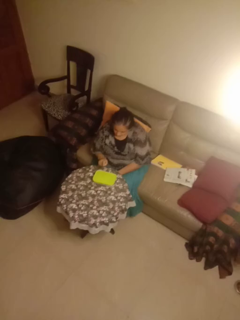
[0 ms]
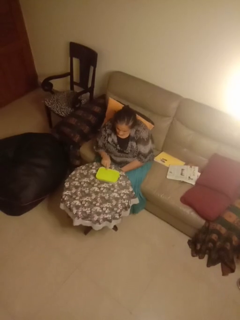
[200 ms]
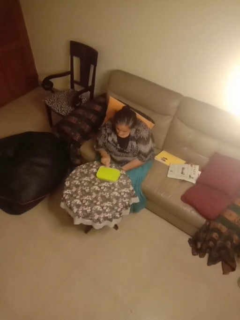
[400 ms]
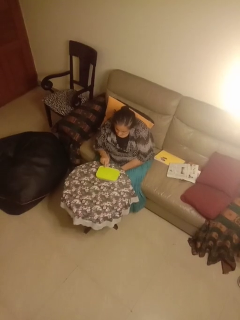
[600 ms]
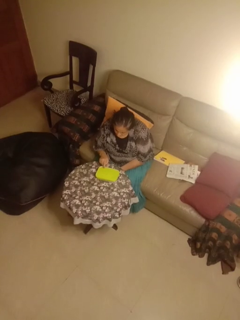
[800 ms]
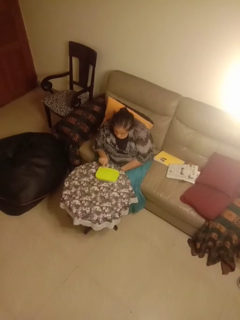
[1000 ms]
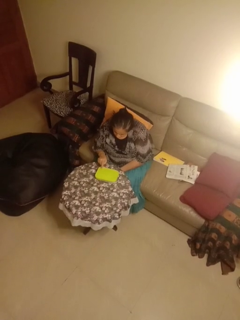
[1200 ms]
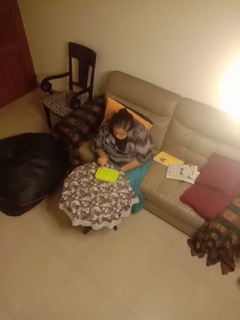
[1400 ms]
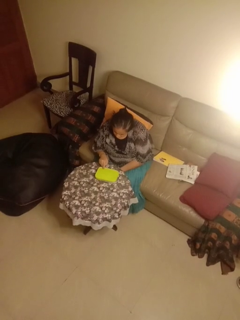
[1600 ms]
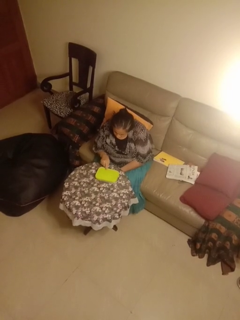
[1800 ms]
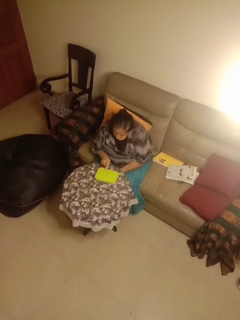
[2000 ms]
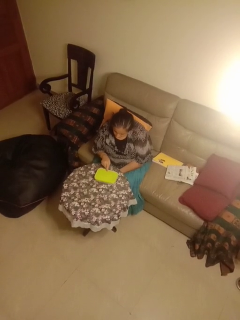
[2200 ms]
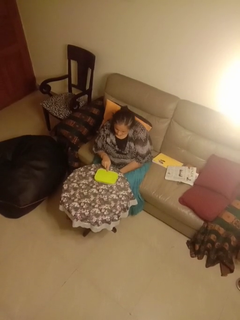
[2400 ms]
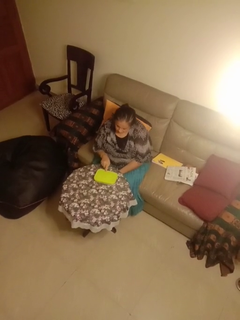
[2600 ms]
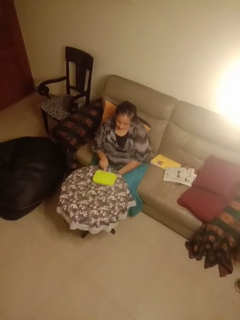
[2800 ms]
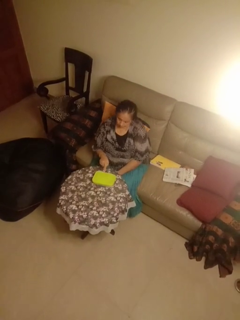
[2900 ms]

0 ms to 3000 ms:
person taps object with finger

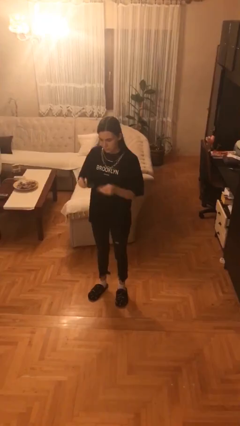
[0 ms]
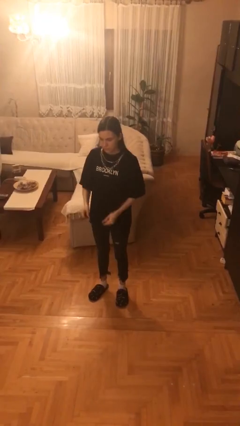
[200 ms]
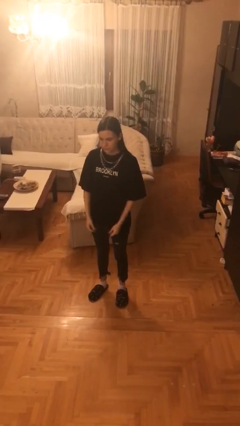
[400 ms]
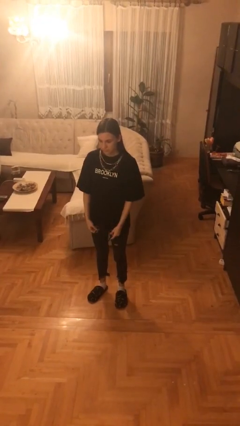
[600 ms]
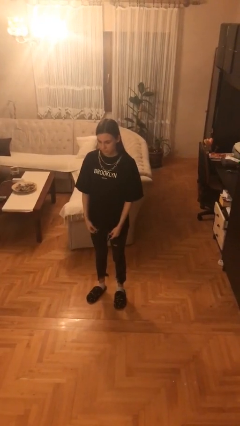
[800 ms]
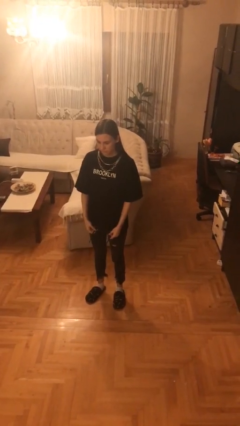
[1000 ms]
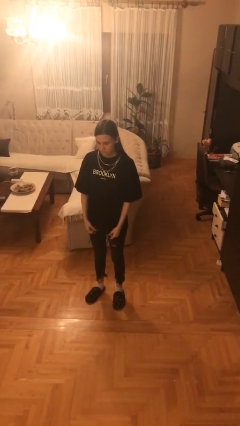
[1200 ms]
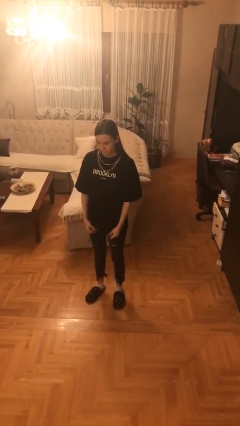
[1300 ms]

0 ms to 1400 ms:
person takes off sunglasses

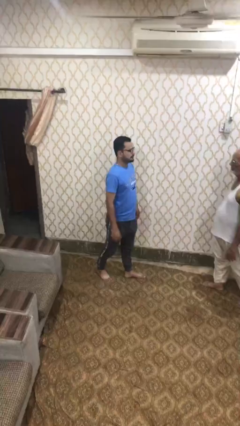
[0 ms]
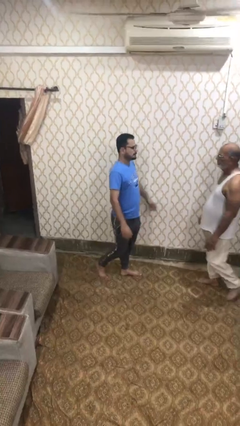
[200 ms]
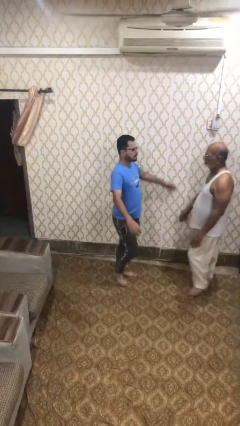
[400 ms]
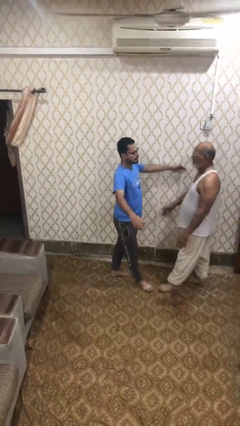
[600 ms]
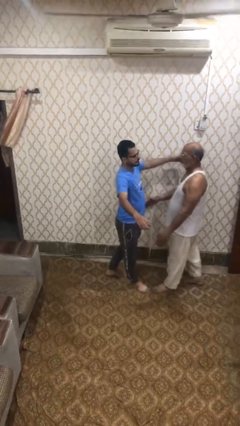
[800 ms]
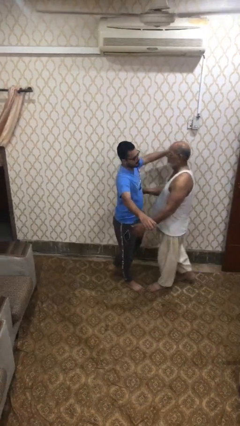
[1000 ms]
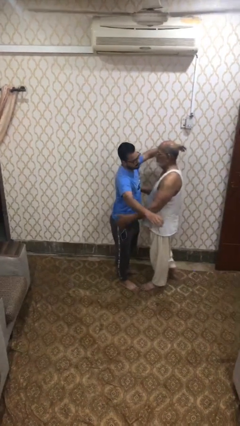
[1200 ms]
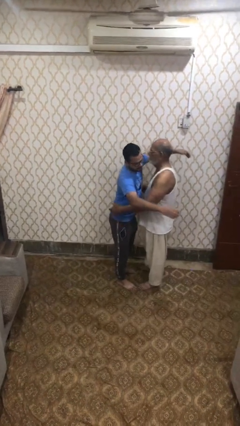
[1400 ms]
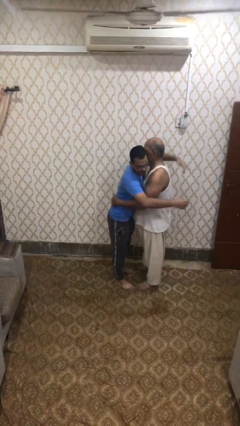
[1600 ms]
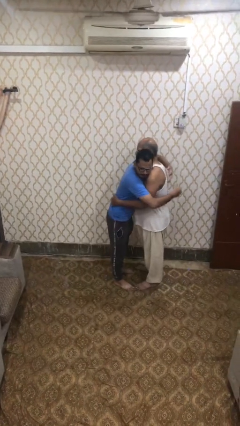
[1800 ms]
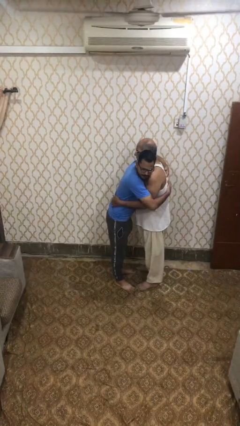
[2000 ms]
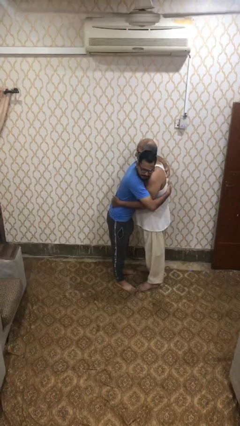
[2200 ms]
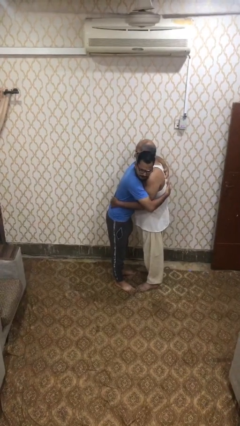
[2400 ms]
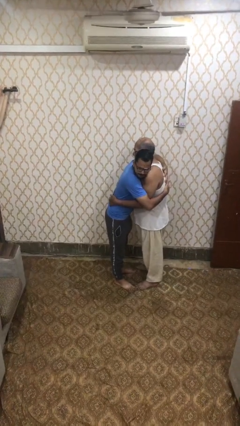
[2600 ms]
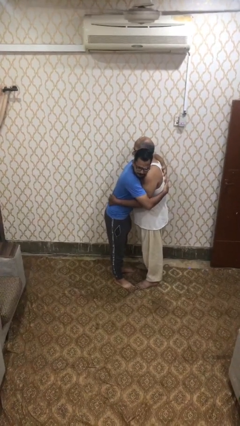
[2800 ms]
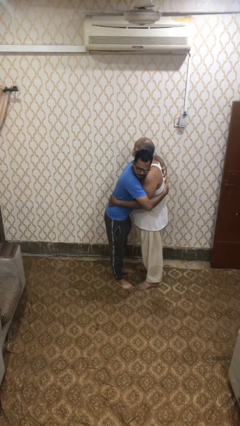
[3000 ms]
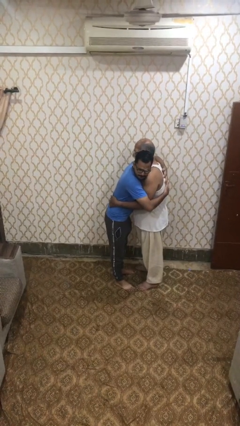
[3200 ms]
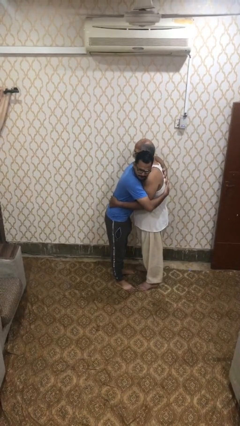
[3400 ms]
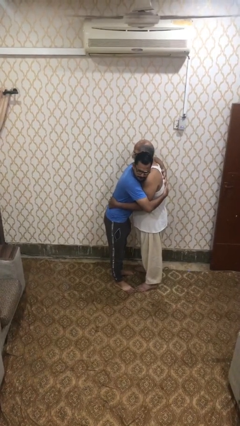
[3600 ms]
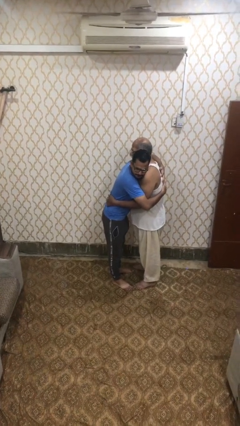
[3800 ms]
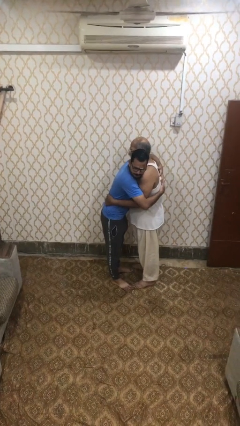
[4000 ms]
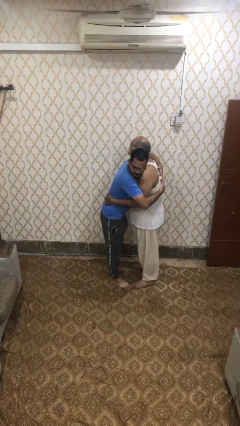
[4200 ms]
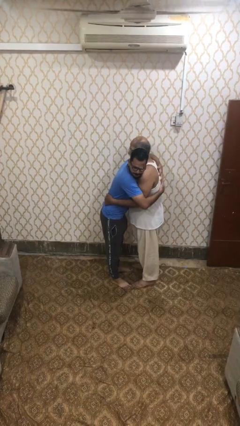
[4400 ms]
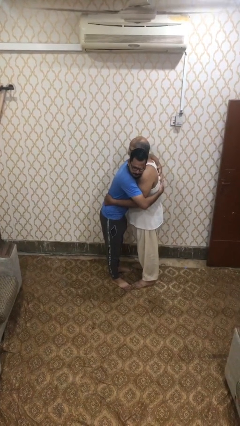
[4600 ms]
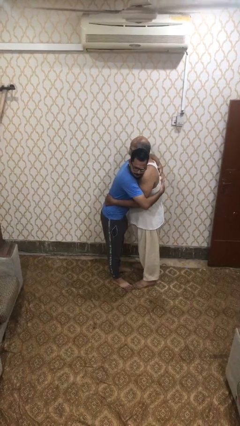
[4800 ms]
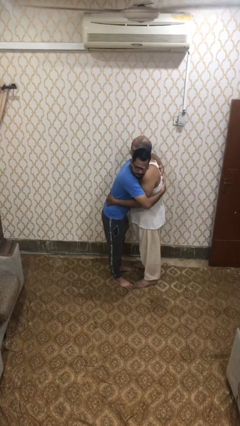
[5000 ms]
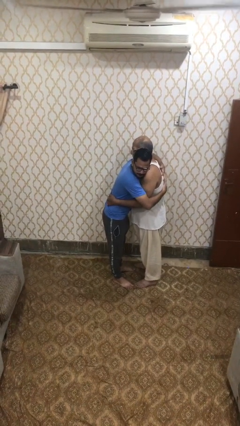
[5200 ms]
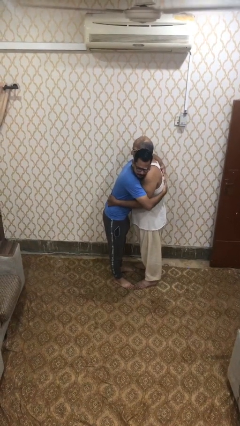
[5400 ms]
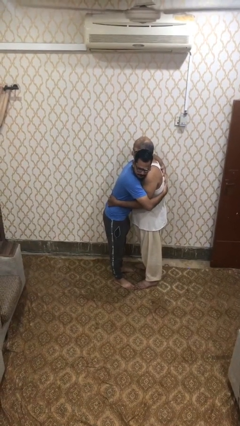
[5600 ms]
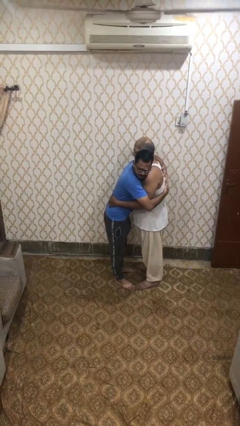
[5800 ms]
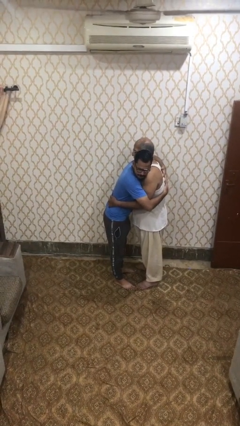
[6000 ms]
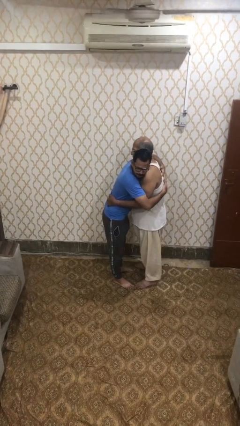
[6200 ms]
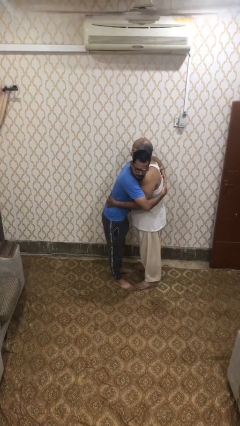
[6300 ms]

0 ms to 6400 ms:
person embraces person

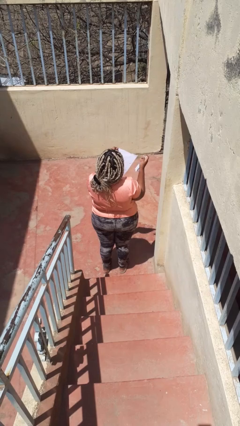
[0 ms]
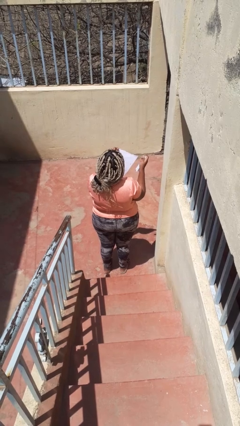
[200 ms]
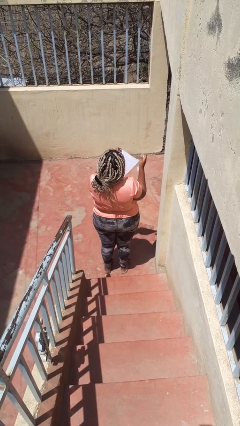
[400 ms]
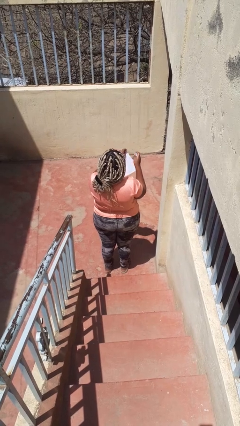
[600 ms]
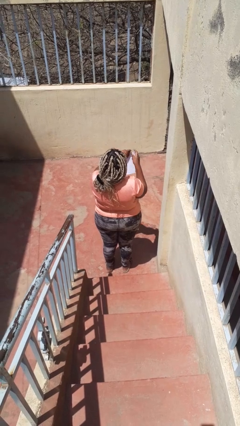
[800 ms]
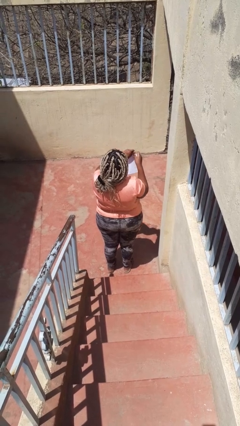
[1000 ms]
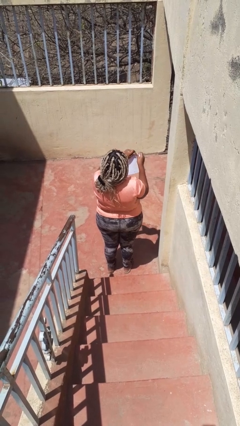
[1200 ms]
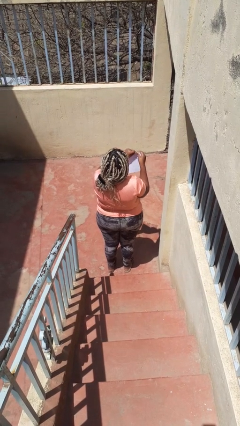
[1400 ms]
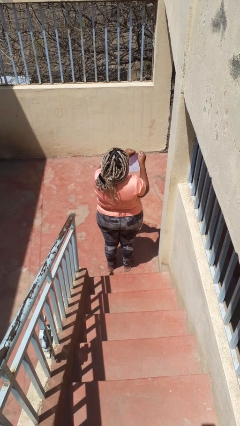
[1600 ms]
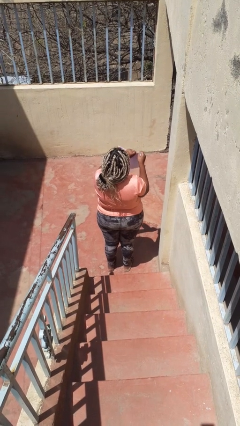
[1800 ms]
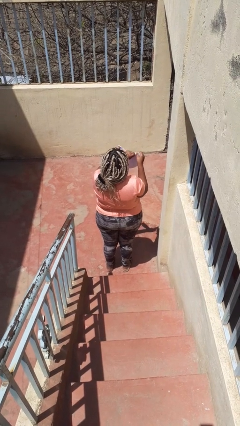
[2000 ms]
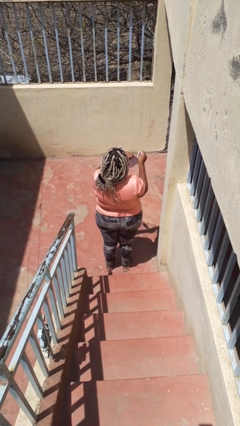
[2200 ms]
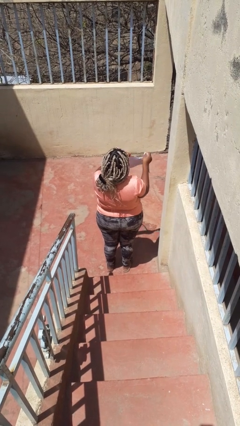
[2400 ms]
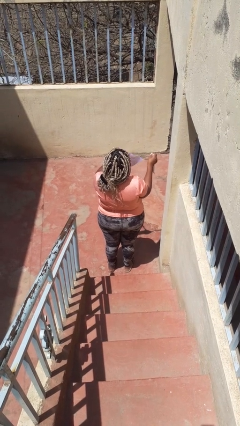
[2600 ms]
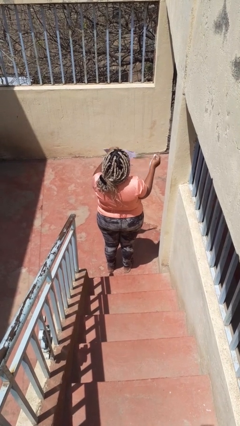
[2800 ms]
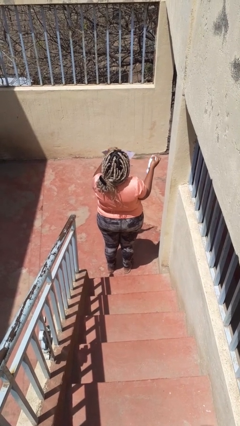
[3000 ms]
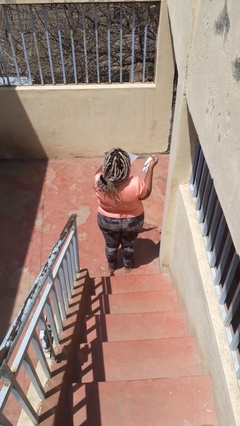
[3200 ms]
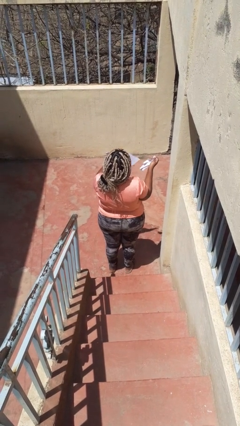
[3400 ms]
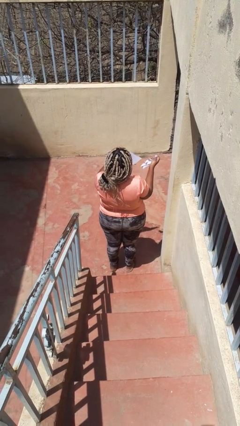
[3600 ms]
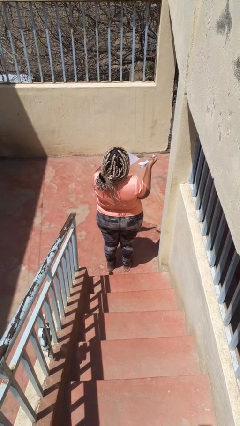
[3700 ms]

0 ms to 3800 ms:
person tears paper

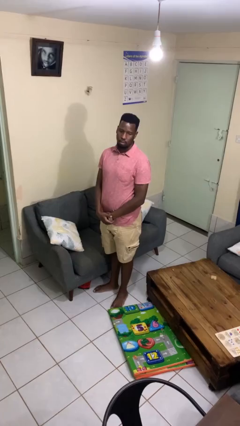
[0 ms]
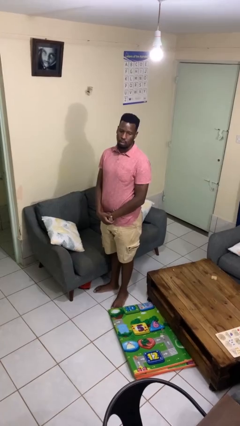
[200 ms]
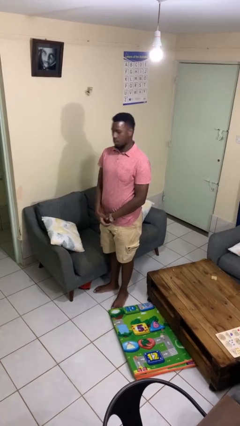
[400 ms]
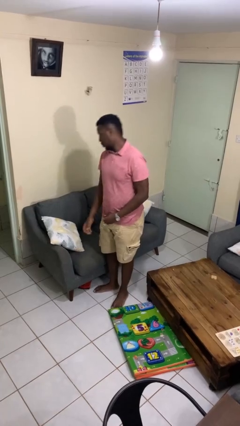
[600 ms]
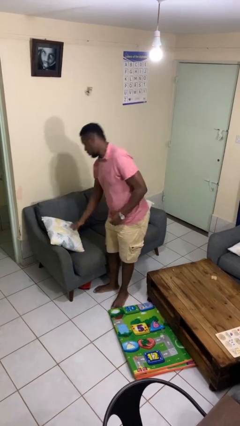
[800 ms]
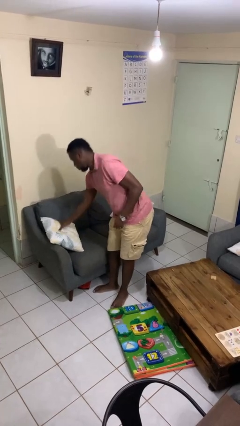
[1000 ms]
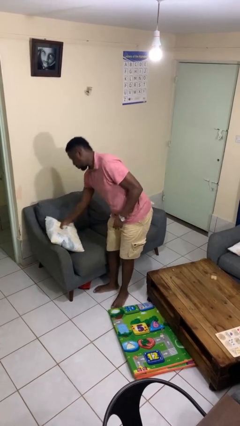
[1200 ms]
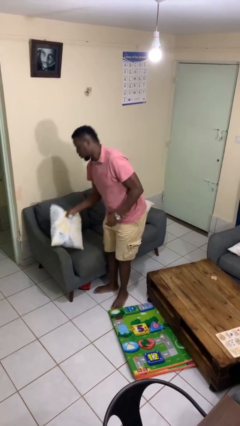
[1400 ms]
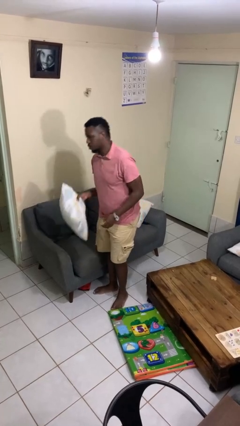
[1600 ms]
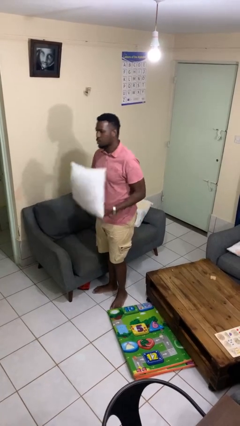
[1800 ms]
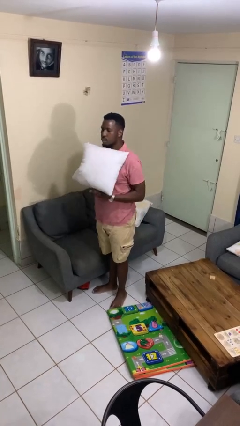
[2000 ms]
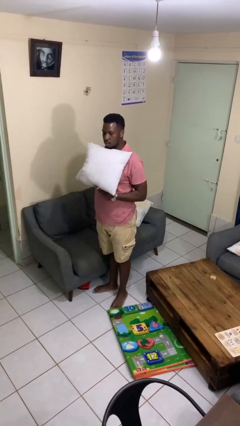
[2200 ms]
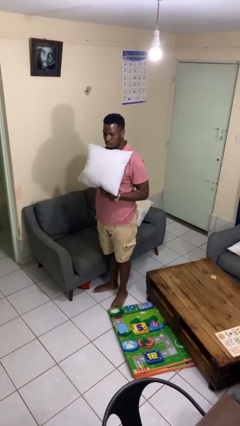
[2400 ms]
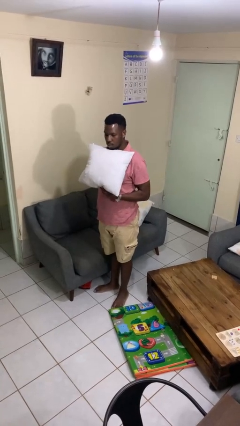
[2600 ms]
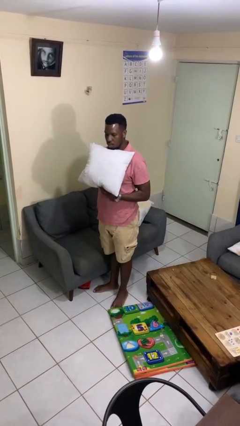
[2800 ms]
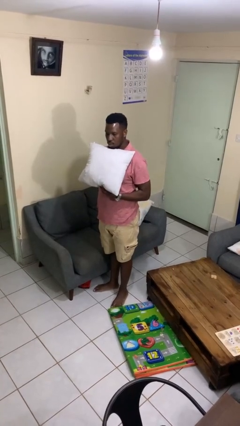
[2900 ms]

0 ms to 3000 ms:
person picks up object from couch

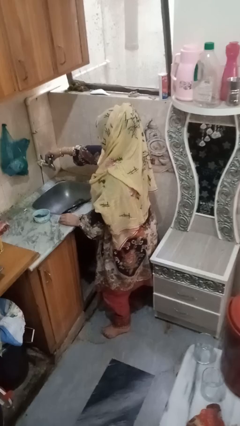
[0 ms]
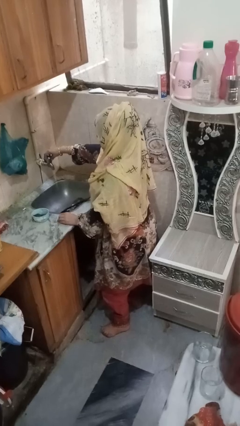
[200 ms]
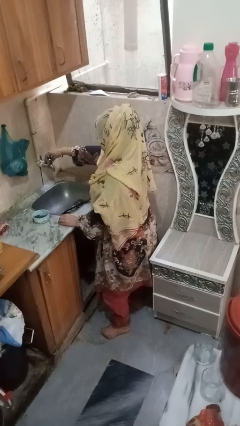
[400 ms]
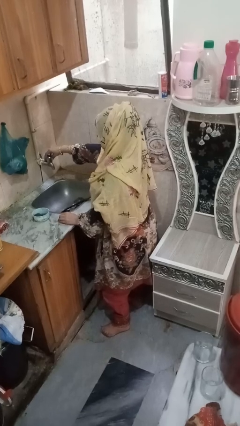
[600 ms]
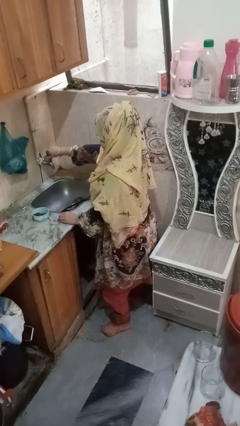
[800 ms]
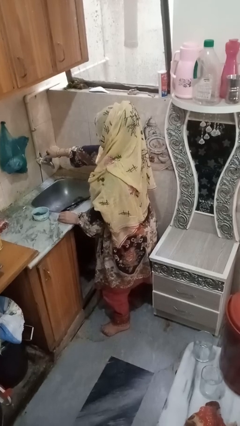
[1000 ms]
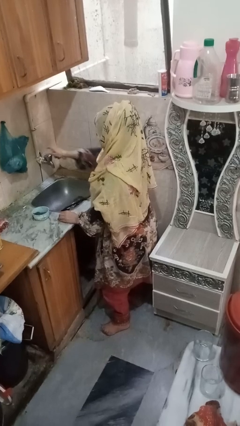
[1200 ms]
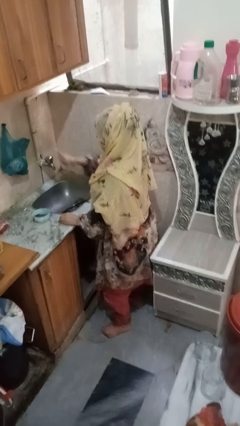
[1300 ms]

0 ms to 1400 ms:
person turns off faucet
